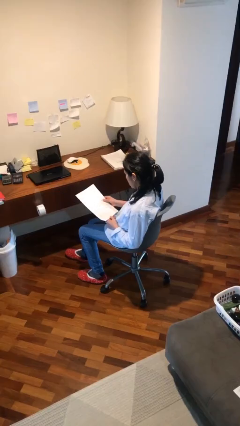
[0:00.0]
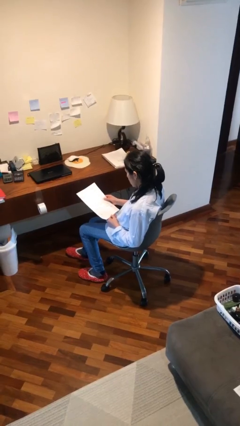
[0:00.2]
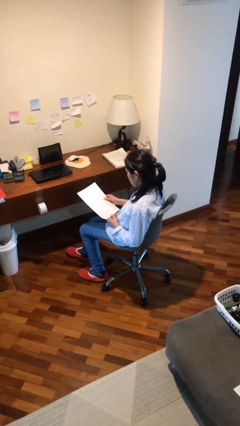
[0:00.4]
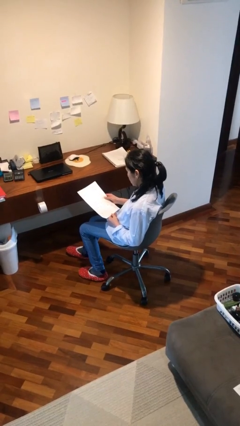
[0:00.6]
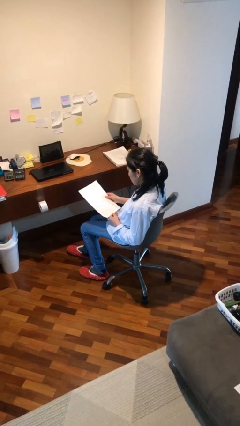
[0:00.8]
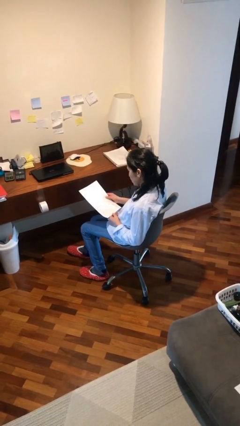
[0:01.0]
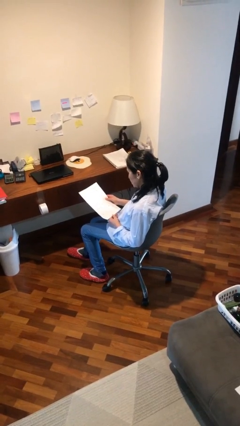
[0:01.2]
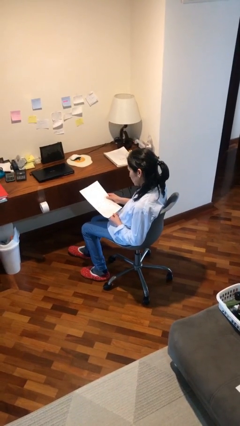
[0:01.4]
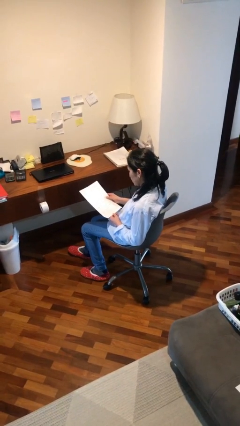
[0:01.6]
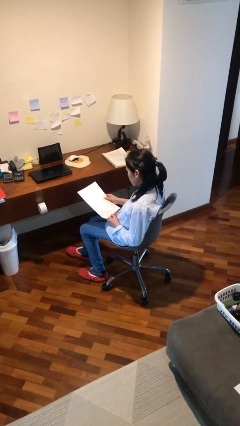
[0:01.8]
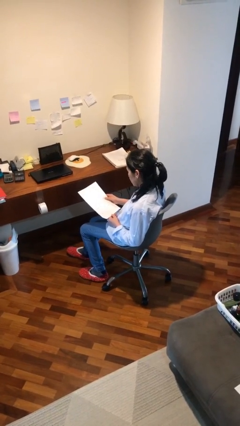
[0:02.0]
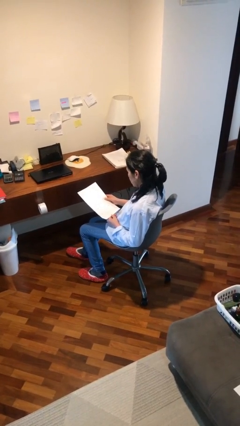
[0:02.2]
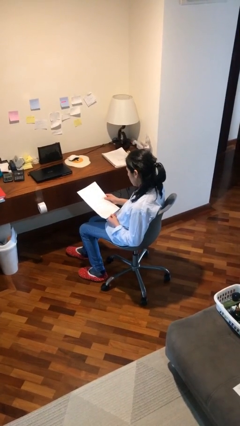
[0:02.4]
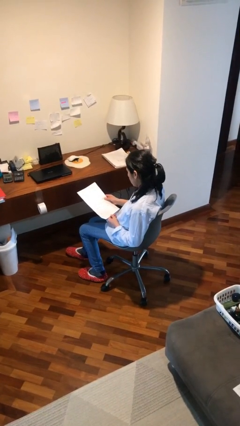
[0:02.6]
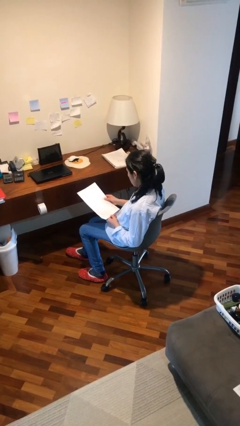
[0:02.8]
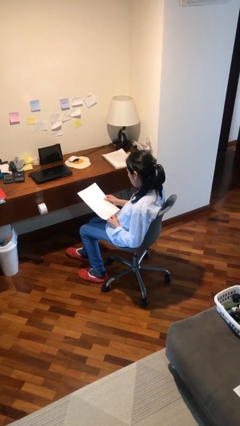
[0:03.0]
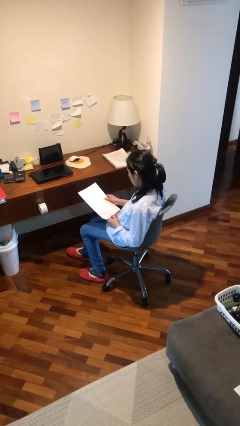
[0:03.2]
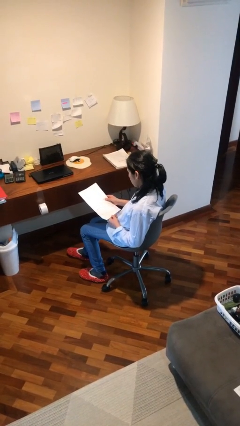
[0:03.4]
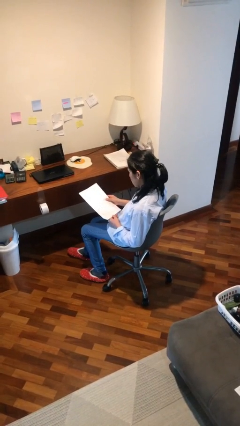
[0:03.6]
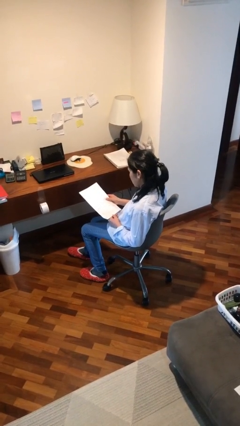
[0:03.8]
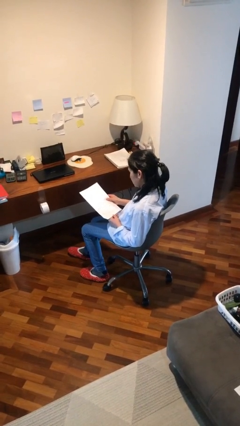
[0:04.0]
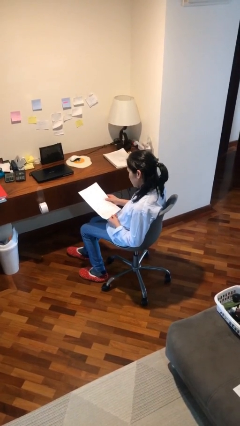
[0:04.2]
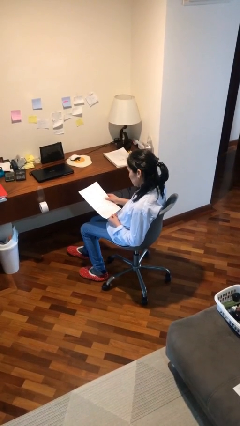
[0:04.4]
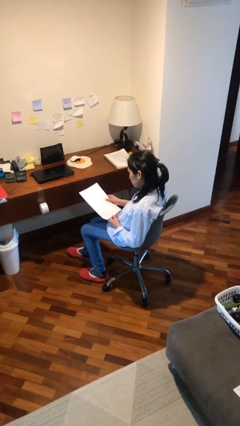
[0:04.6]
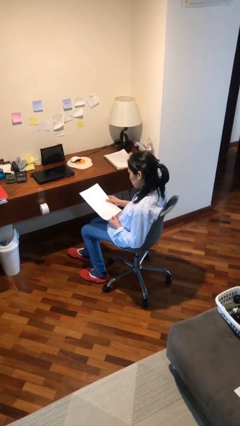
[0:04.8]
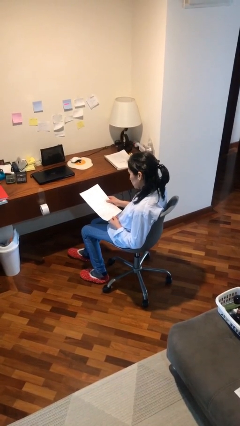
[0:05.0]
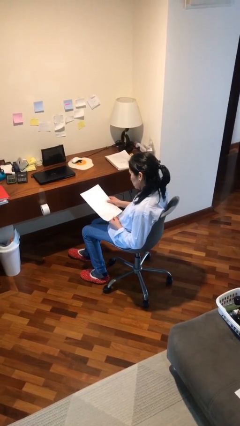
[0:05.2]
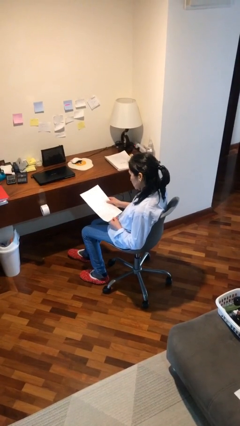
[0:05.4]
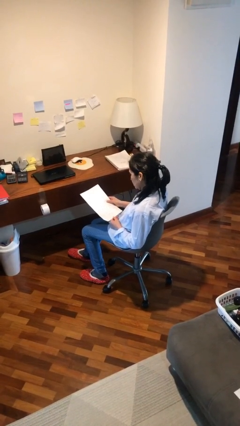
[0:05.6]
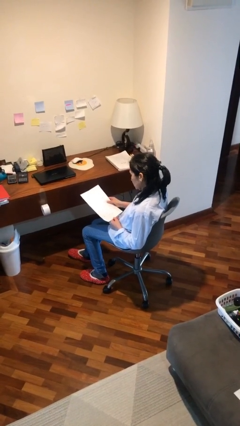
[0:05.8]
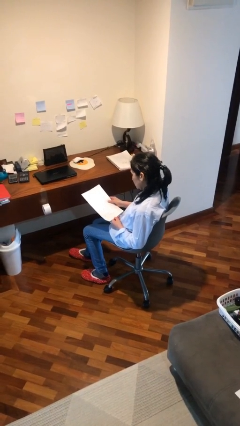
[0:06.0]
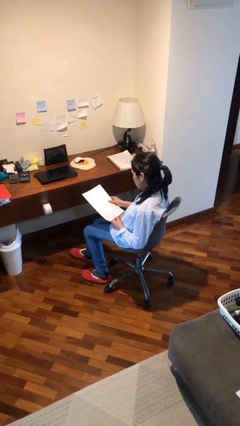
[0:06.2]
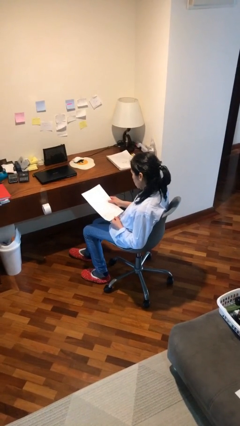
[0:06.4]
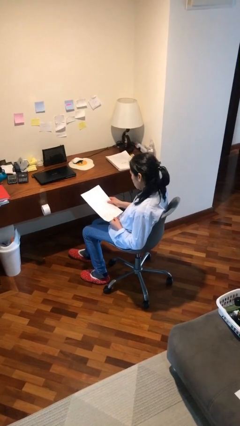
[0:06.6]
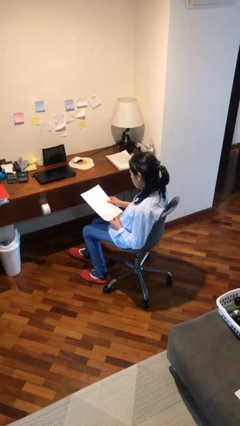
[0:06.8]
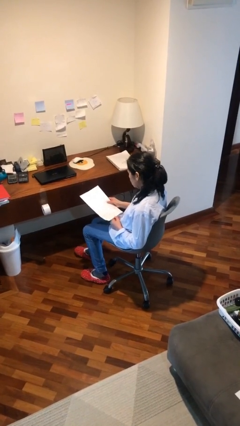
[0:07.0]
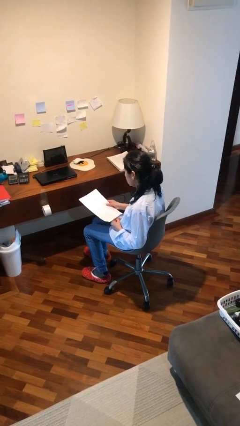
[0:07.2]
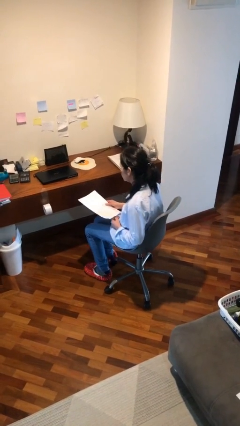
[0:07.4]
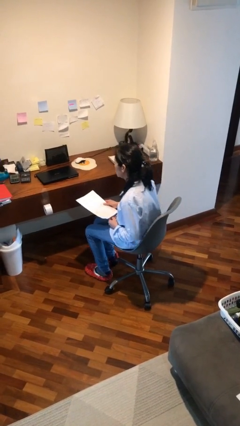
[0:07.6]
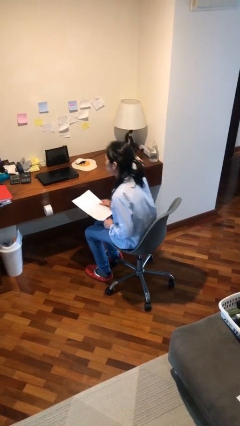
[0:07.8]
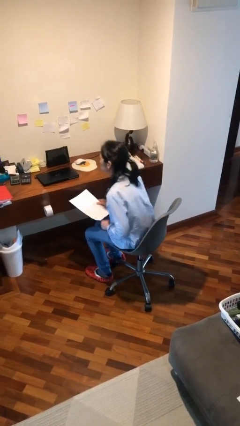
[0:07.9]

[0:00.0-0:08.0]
person reads document

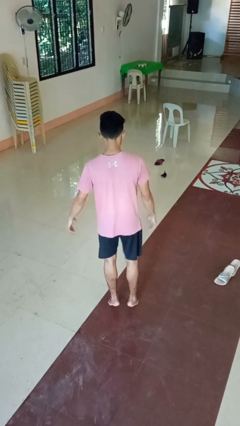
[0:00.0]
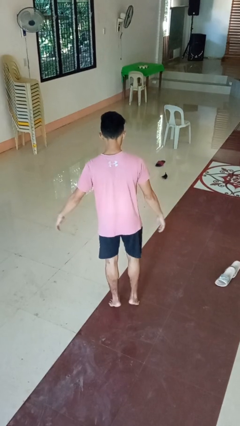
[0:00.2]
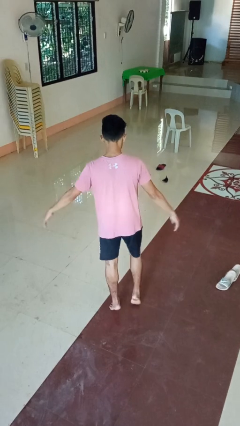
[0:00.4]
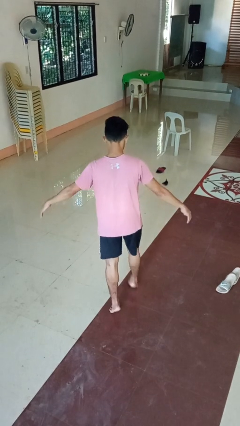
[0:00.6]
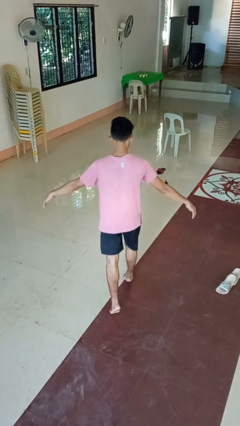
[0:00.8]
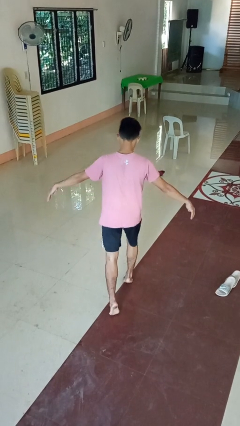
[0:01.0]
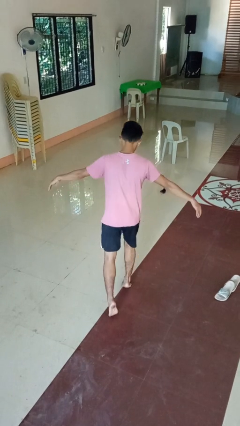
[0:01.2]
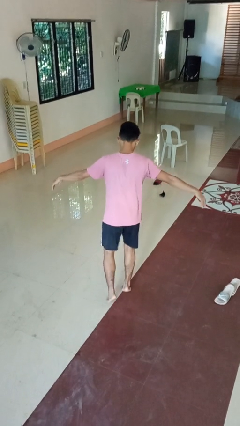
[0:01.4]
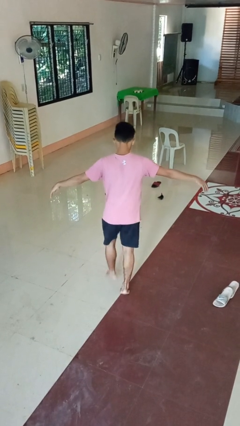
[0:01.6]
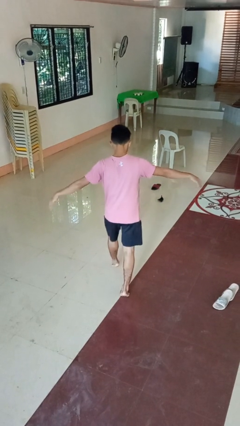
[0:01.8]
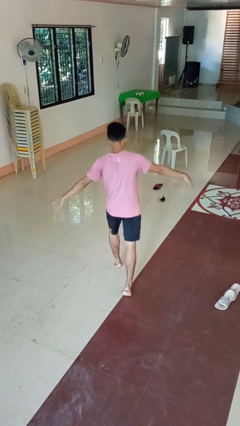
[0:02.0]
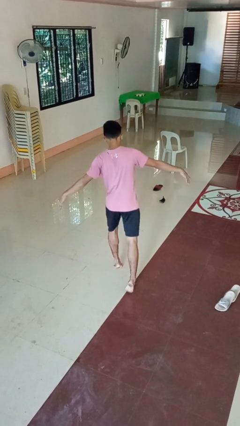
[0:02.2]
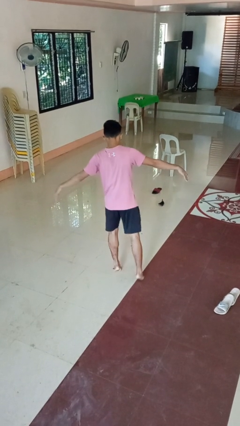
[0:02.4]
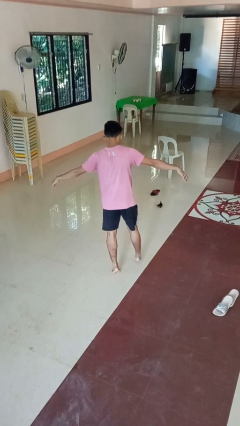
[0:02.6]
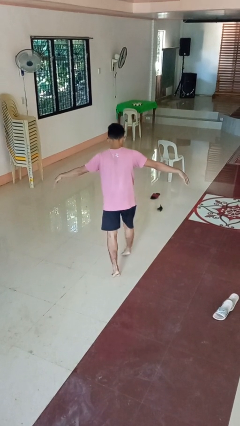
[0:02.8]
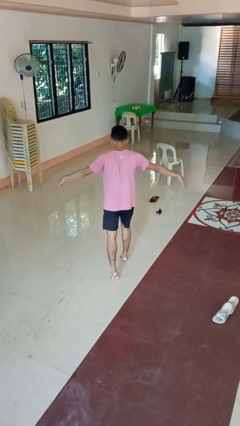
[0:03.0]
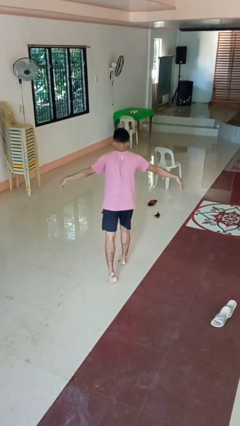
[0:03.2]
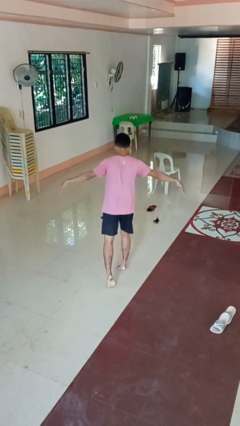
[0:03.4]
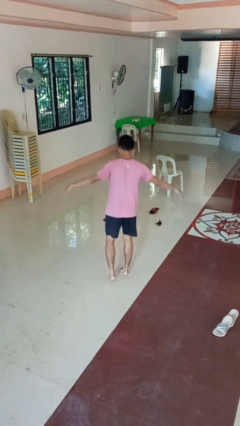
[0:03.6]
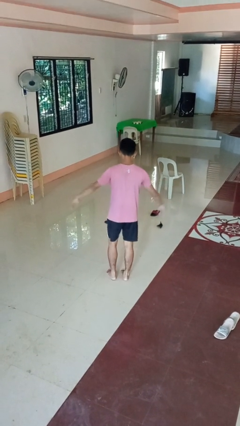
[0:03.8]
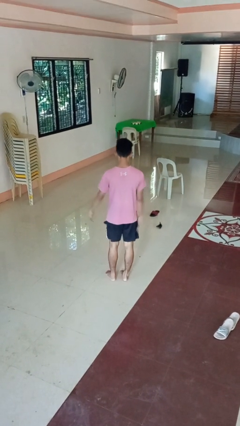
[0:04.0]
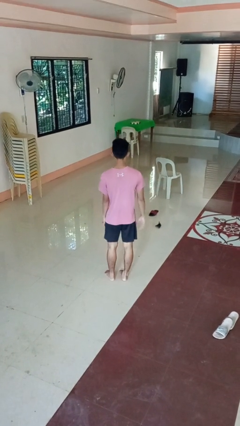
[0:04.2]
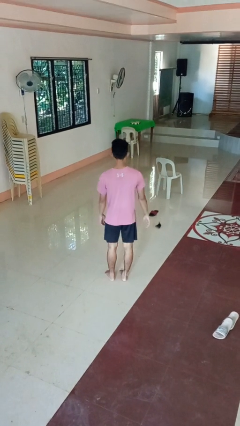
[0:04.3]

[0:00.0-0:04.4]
person walks tiptoe

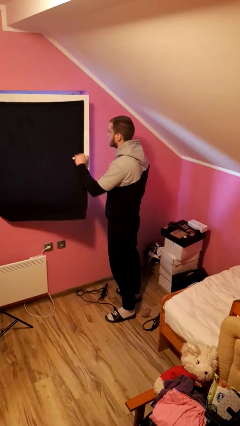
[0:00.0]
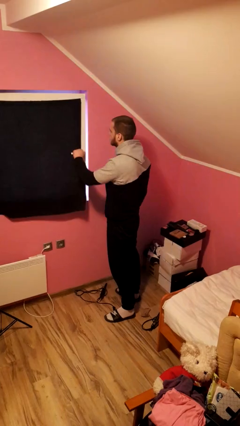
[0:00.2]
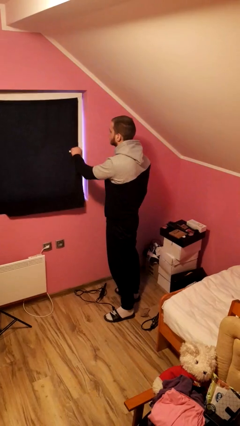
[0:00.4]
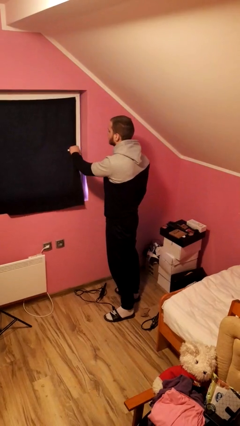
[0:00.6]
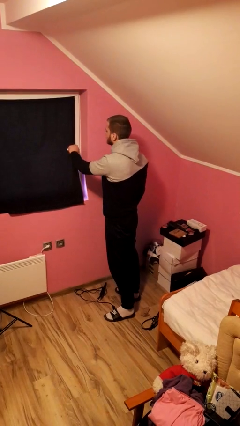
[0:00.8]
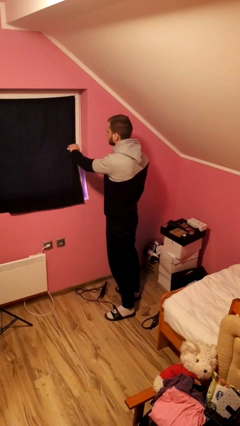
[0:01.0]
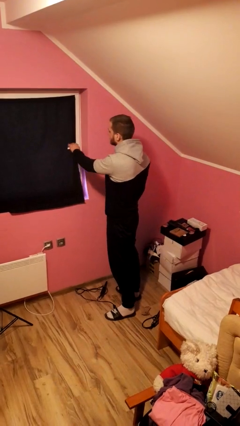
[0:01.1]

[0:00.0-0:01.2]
person closes home window

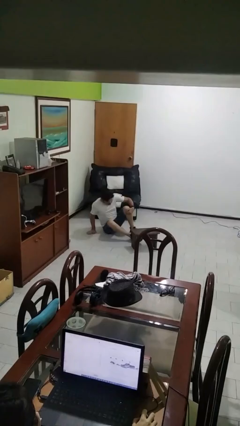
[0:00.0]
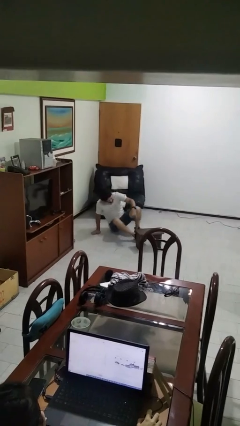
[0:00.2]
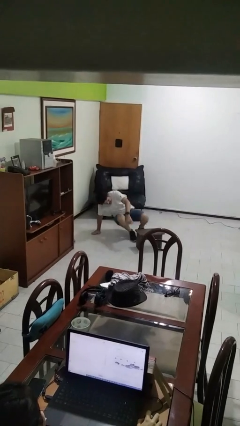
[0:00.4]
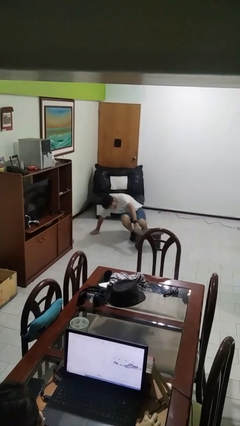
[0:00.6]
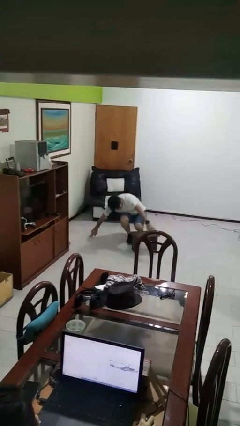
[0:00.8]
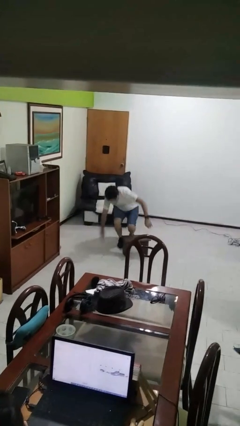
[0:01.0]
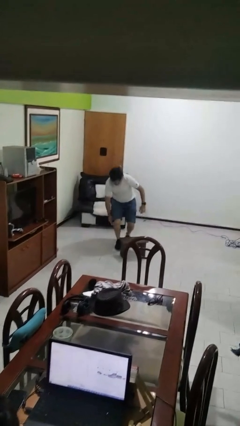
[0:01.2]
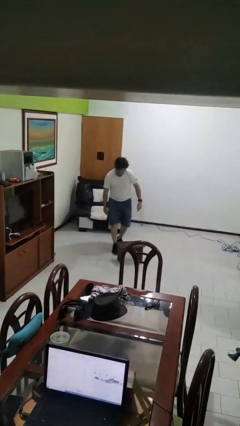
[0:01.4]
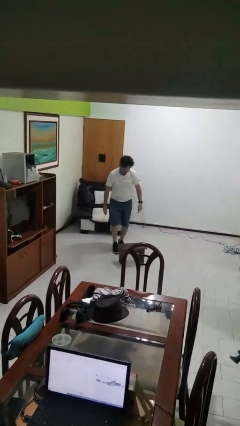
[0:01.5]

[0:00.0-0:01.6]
person stands up from floor

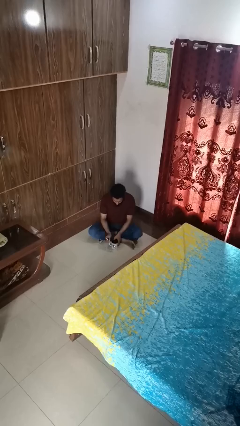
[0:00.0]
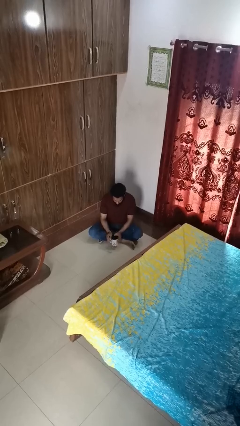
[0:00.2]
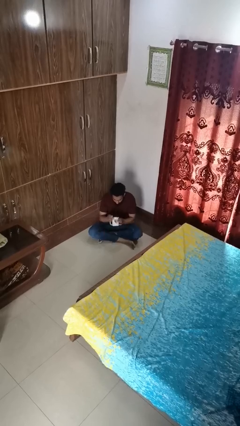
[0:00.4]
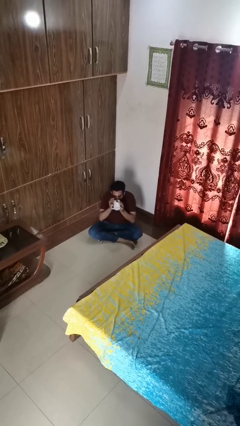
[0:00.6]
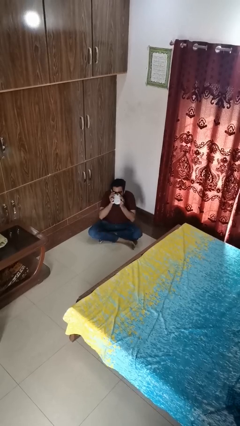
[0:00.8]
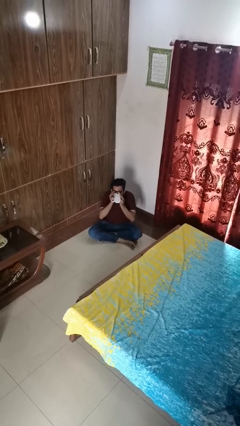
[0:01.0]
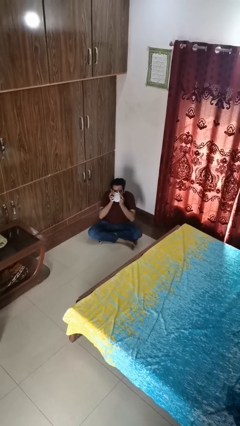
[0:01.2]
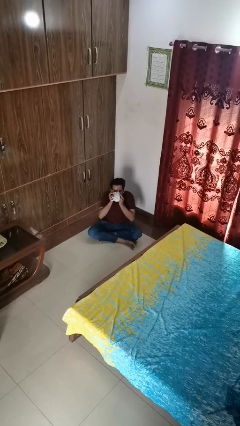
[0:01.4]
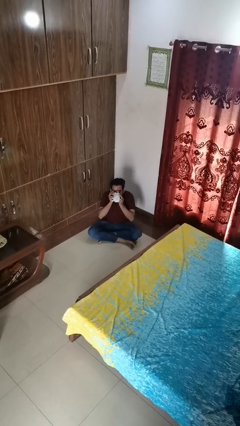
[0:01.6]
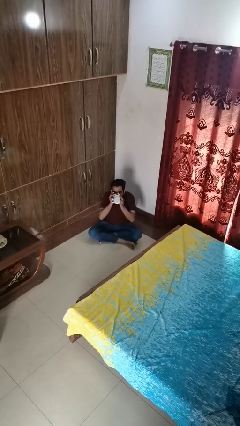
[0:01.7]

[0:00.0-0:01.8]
person drinks from mug

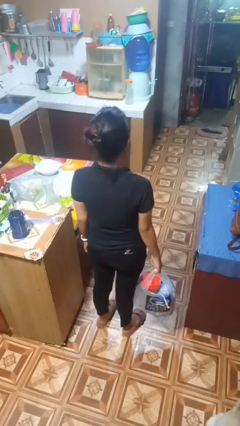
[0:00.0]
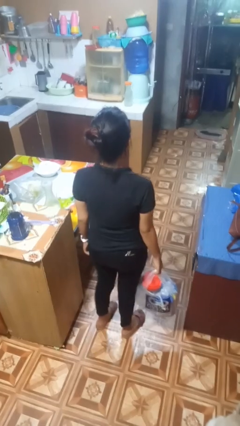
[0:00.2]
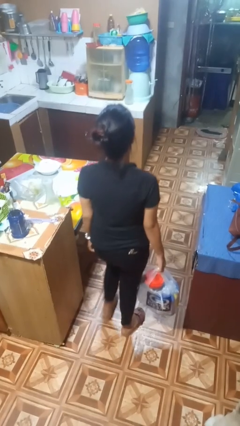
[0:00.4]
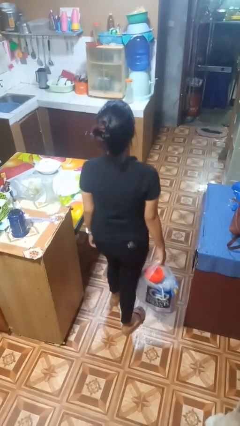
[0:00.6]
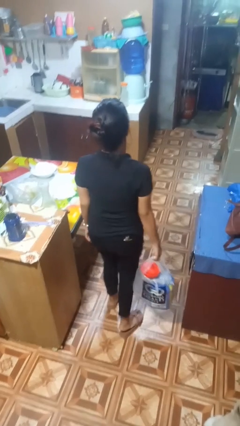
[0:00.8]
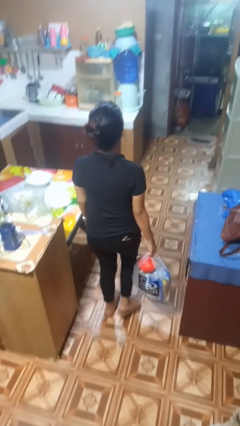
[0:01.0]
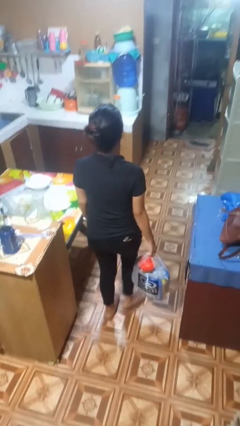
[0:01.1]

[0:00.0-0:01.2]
person carries groceries
